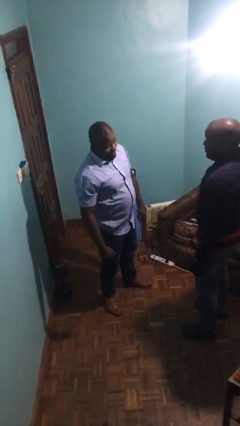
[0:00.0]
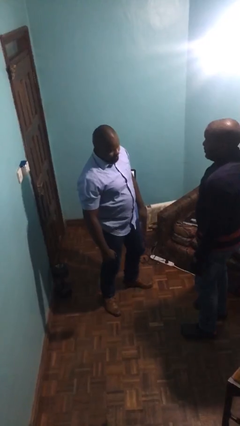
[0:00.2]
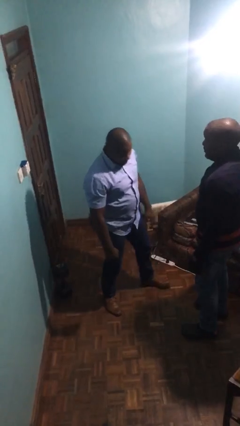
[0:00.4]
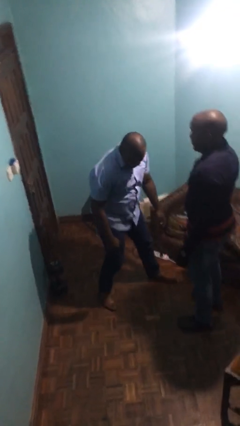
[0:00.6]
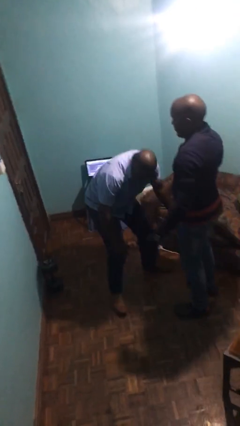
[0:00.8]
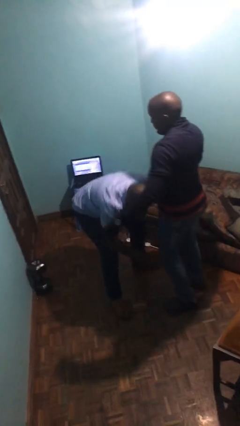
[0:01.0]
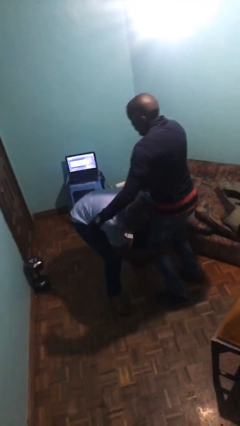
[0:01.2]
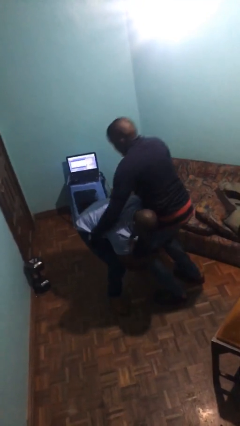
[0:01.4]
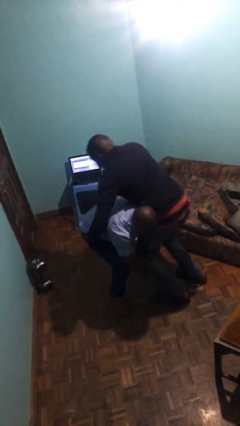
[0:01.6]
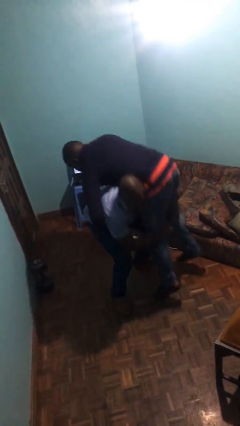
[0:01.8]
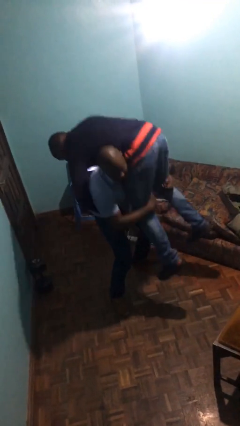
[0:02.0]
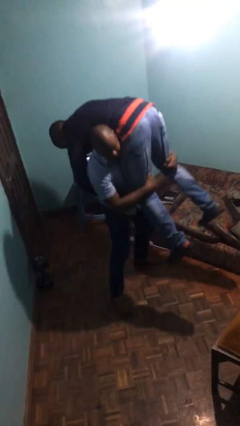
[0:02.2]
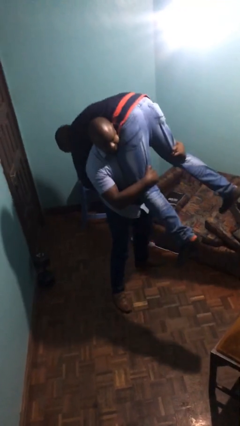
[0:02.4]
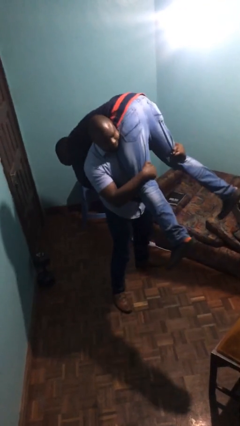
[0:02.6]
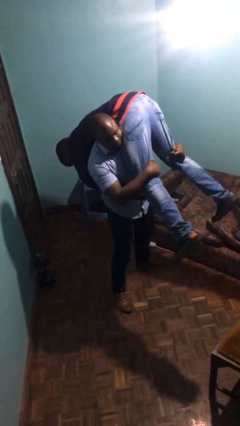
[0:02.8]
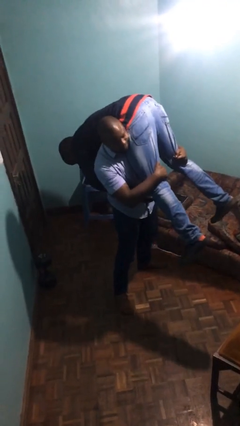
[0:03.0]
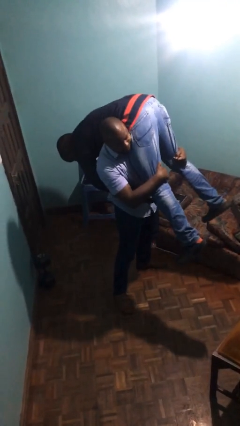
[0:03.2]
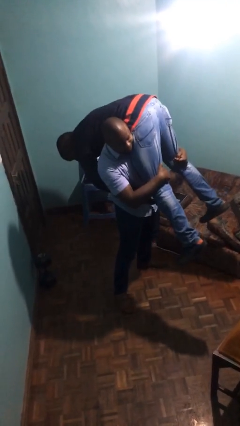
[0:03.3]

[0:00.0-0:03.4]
person carries person over shoulder

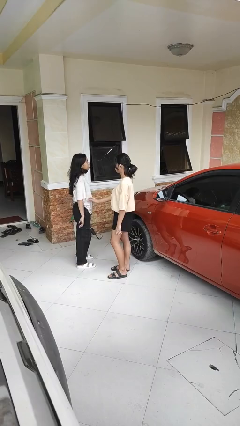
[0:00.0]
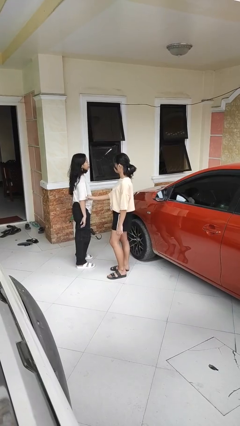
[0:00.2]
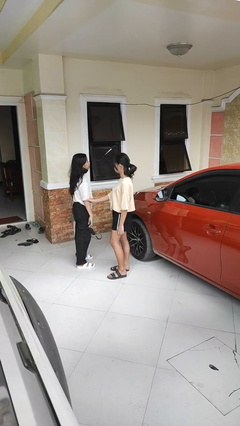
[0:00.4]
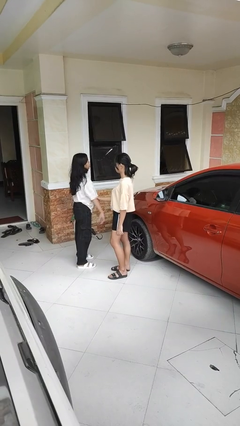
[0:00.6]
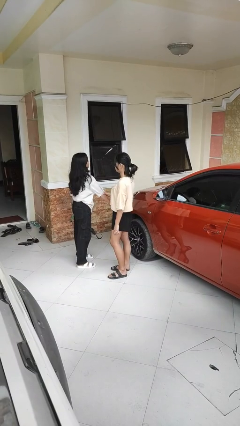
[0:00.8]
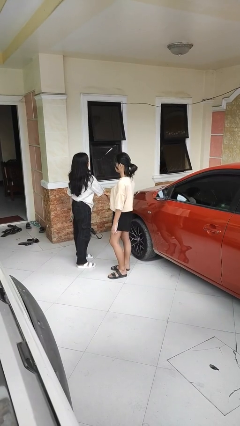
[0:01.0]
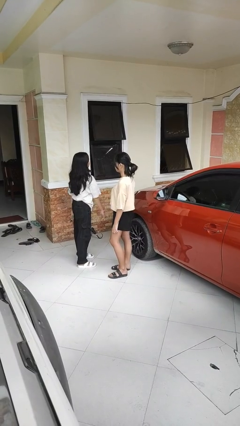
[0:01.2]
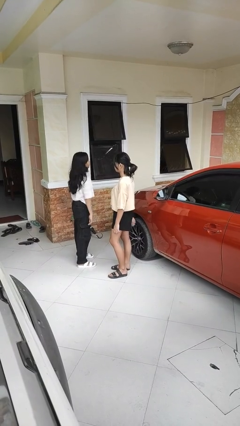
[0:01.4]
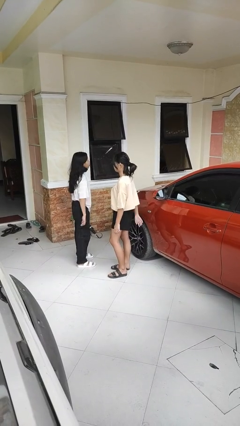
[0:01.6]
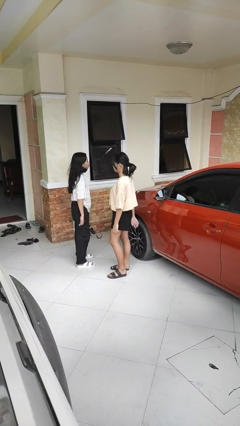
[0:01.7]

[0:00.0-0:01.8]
person grabs person by forearm

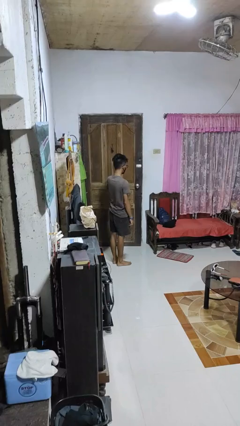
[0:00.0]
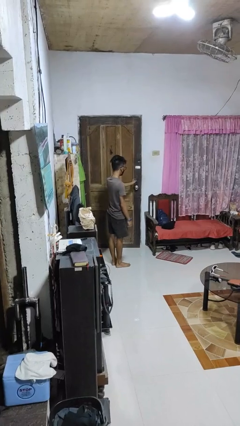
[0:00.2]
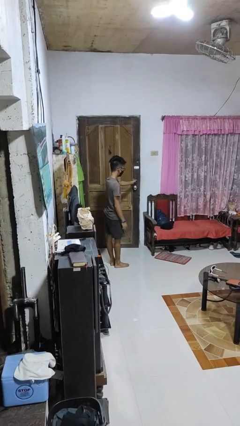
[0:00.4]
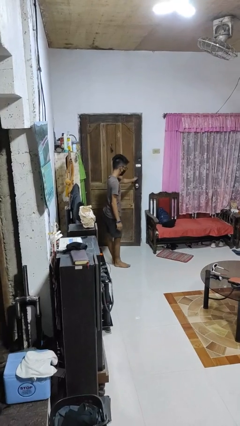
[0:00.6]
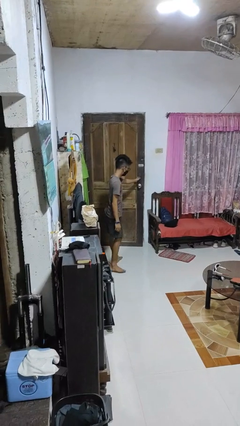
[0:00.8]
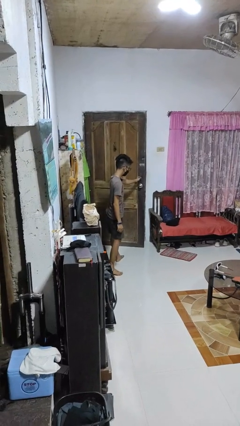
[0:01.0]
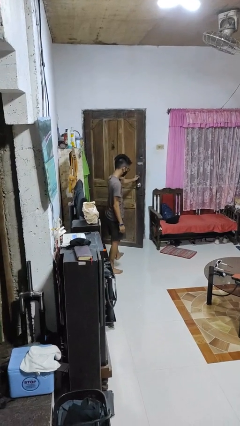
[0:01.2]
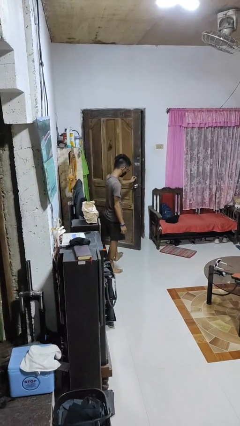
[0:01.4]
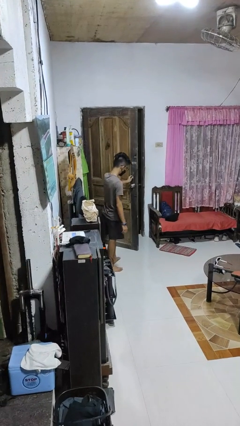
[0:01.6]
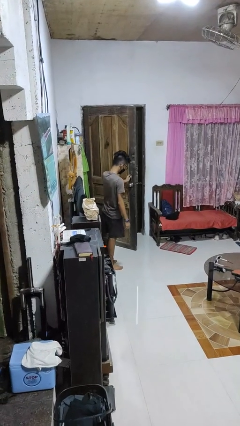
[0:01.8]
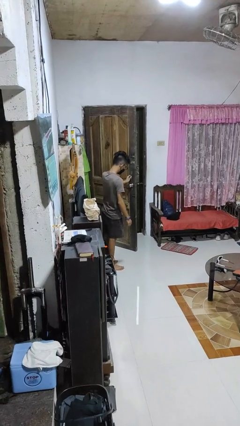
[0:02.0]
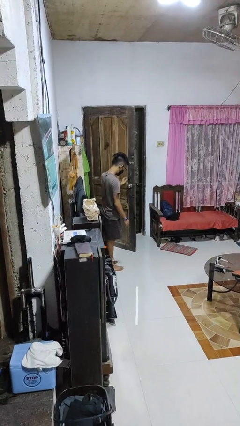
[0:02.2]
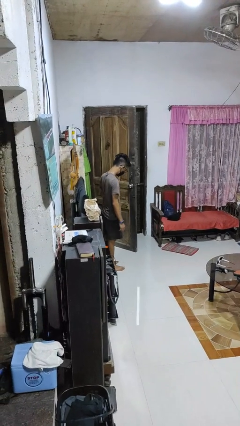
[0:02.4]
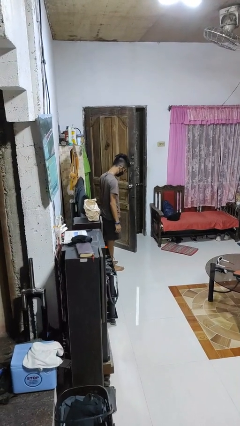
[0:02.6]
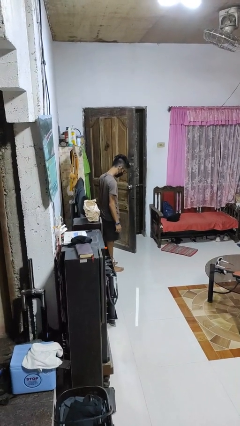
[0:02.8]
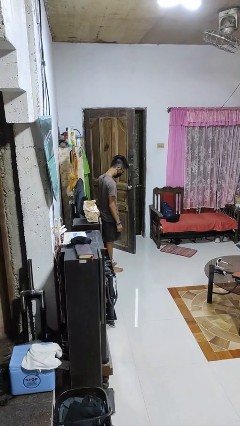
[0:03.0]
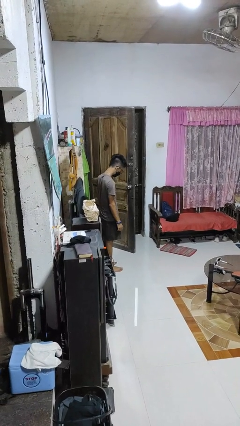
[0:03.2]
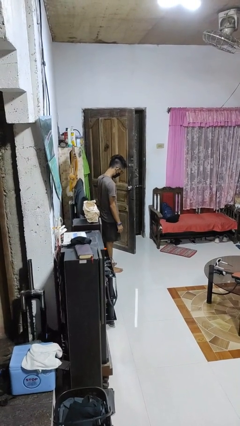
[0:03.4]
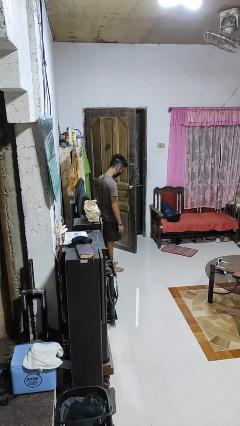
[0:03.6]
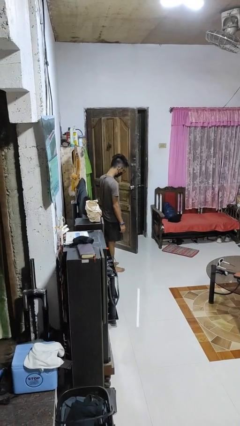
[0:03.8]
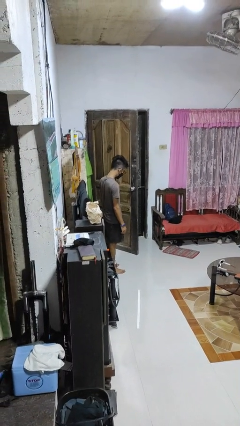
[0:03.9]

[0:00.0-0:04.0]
person opens facility door

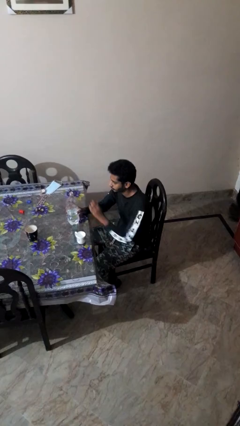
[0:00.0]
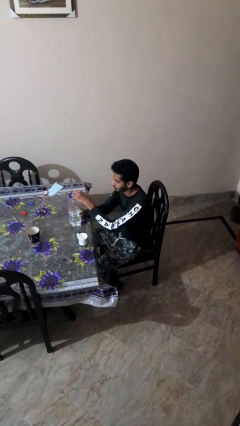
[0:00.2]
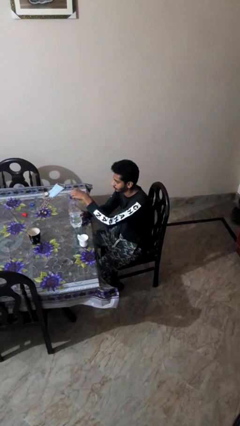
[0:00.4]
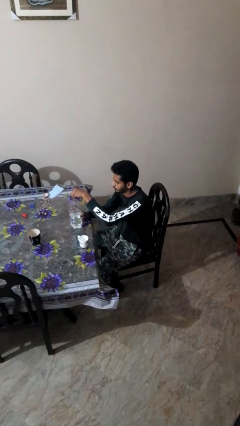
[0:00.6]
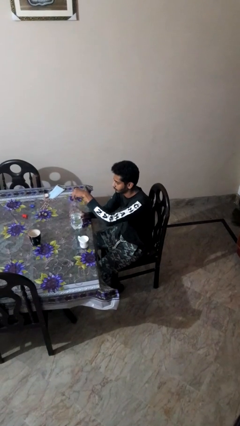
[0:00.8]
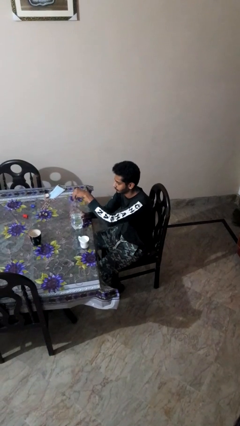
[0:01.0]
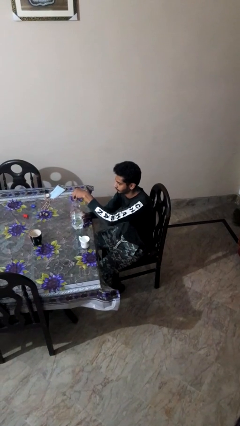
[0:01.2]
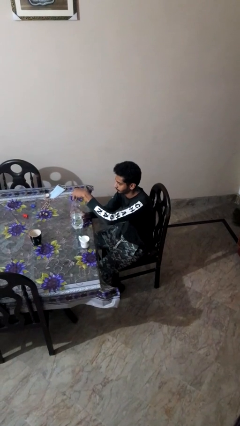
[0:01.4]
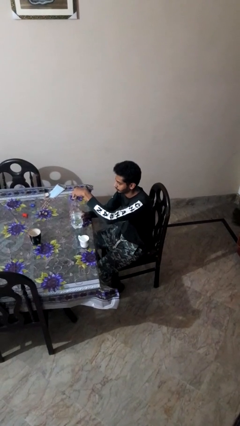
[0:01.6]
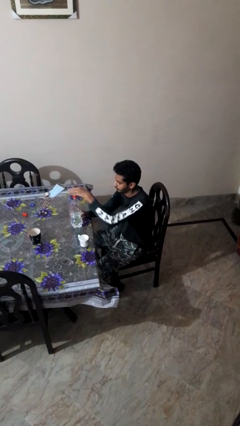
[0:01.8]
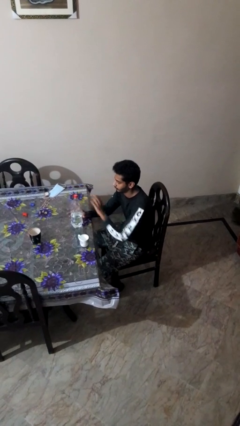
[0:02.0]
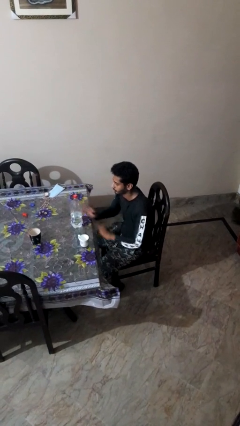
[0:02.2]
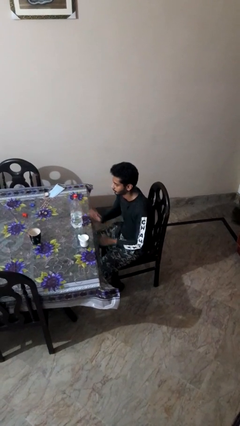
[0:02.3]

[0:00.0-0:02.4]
person screws lid to bottle

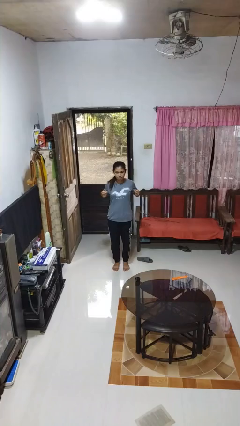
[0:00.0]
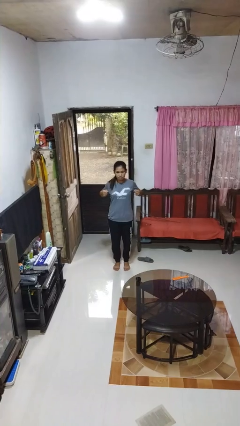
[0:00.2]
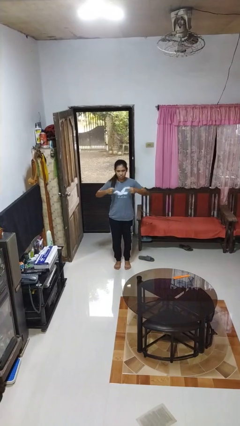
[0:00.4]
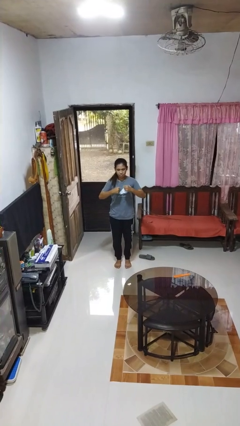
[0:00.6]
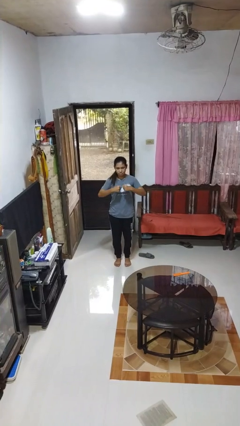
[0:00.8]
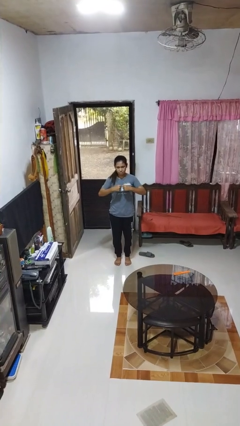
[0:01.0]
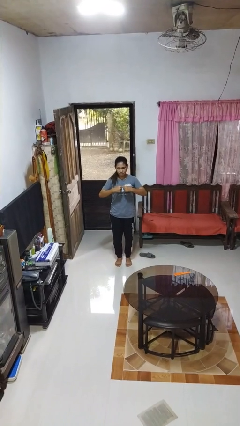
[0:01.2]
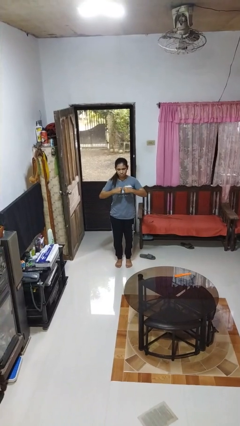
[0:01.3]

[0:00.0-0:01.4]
person gestures zoom out

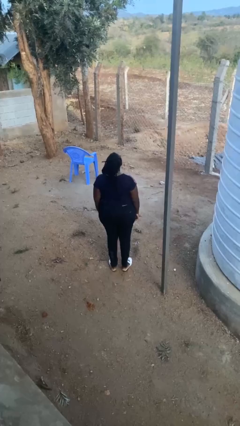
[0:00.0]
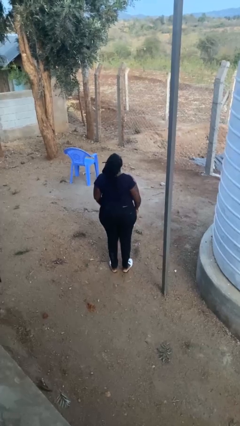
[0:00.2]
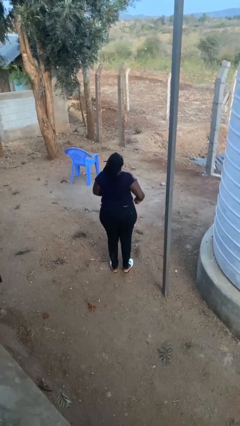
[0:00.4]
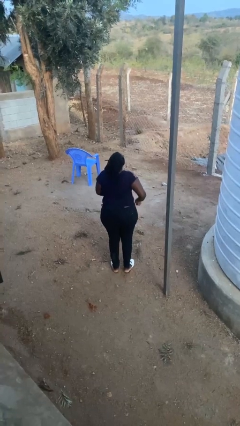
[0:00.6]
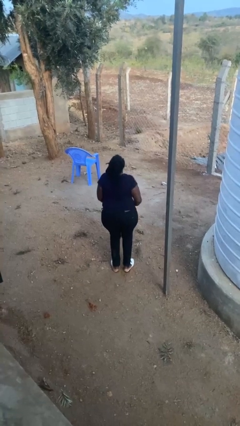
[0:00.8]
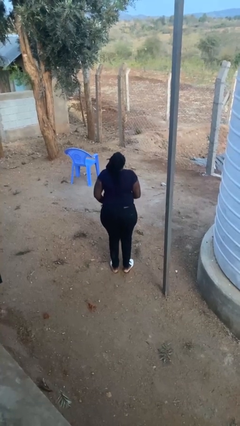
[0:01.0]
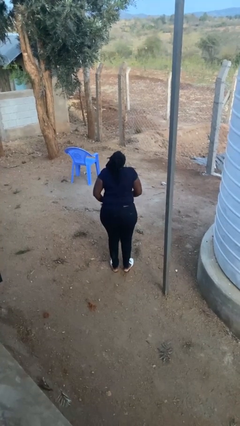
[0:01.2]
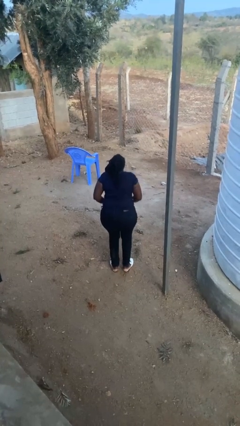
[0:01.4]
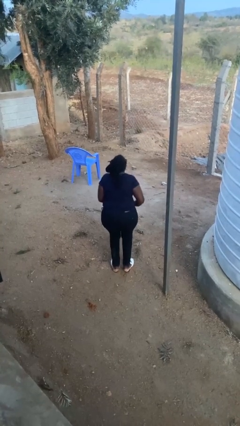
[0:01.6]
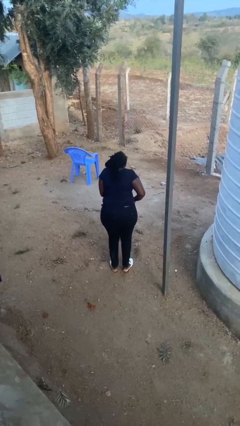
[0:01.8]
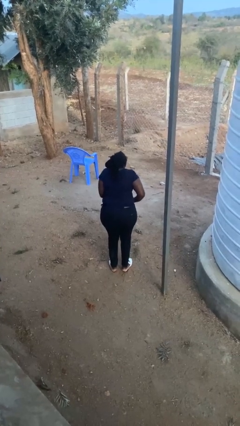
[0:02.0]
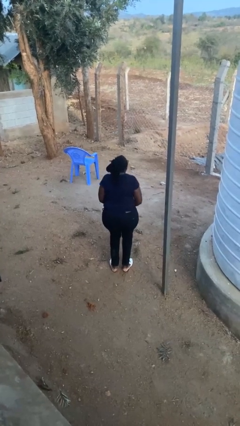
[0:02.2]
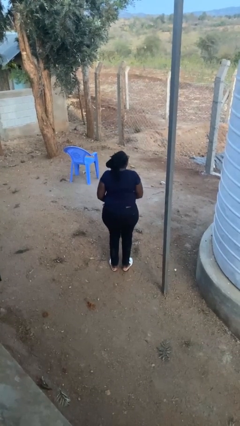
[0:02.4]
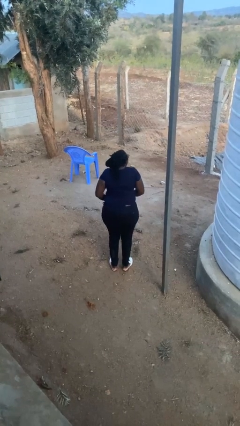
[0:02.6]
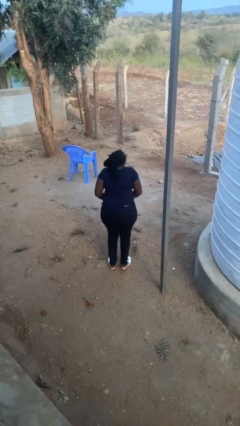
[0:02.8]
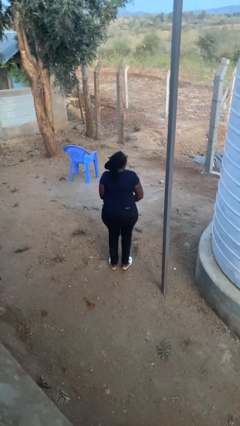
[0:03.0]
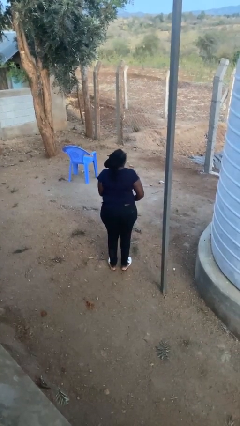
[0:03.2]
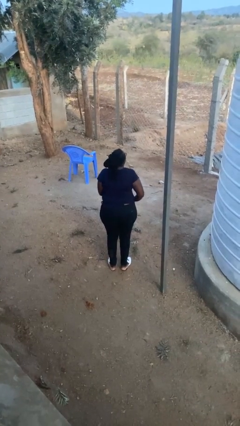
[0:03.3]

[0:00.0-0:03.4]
person dances in place

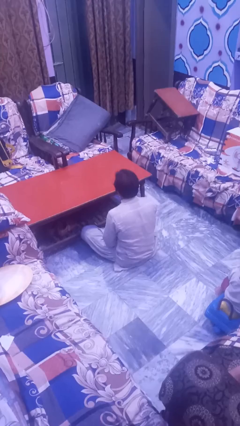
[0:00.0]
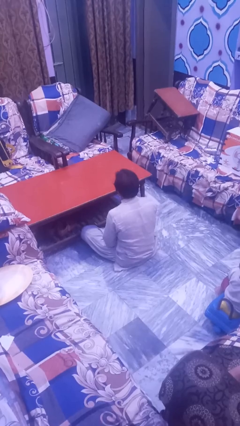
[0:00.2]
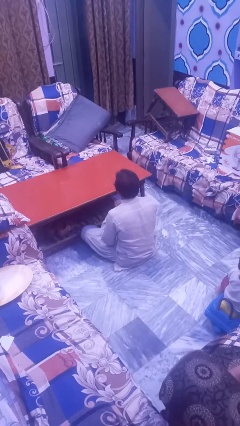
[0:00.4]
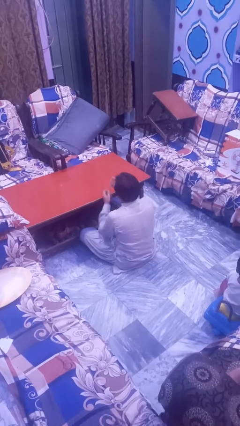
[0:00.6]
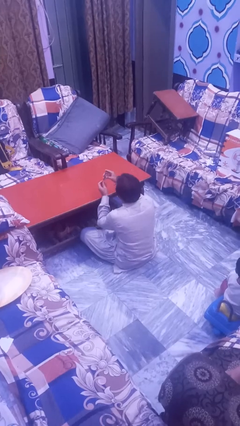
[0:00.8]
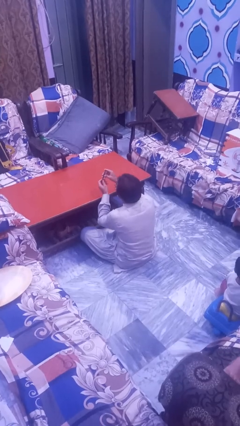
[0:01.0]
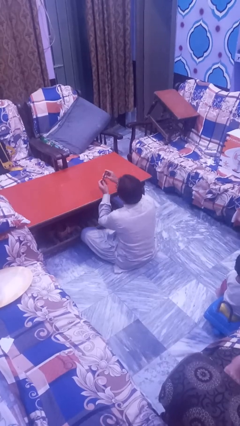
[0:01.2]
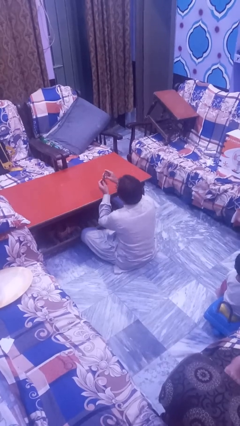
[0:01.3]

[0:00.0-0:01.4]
person clips fingernails
